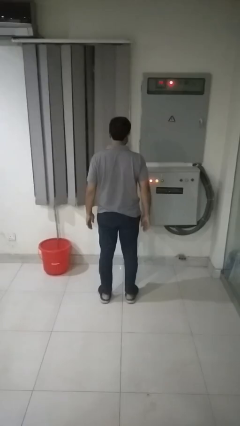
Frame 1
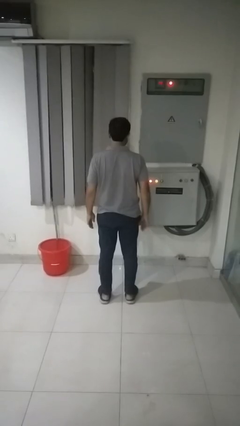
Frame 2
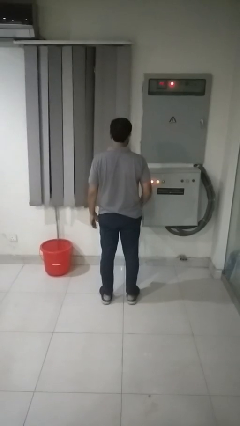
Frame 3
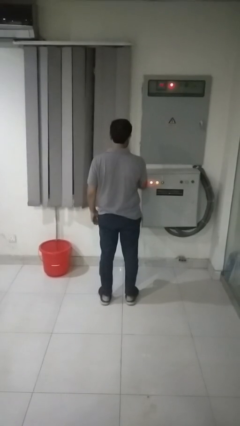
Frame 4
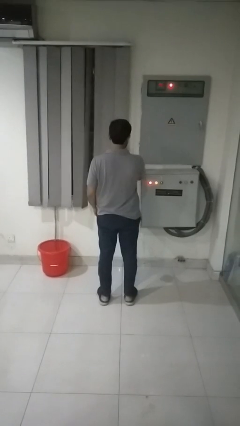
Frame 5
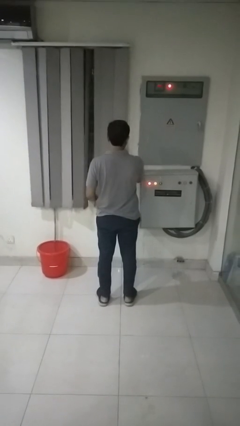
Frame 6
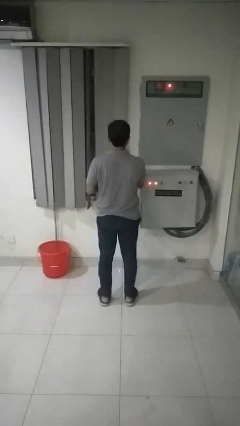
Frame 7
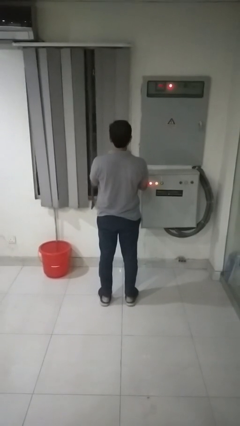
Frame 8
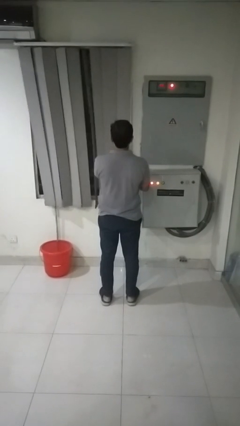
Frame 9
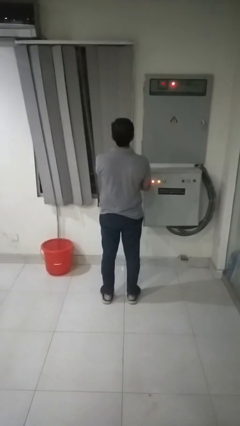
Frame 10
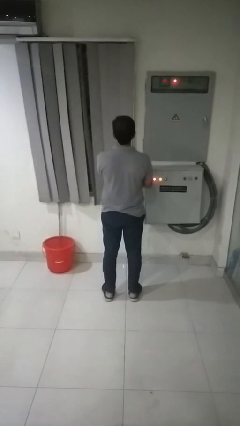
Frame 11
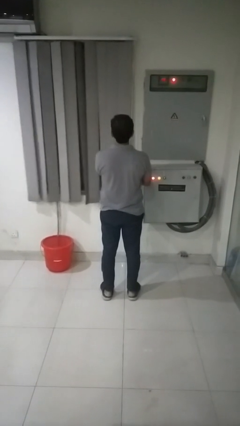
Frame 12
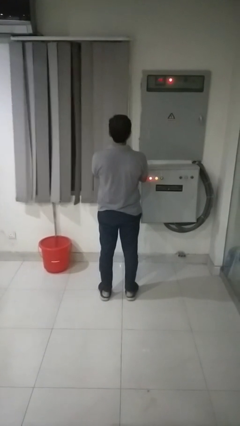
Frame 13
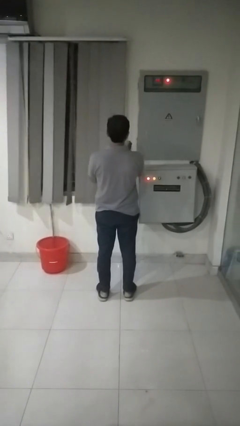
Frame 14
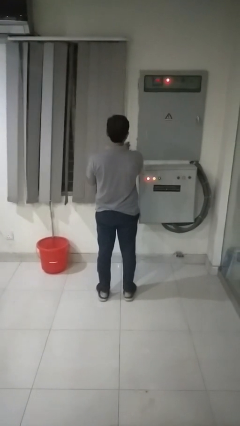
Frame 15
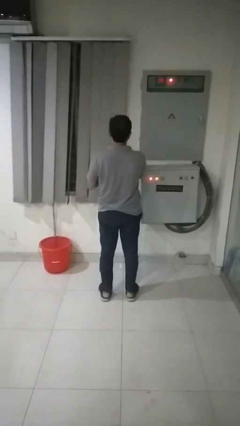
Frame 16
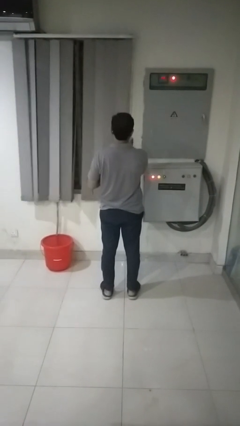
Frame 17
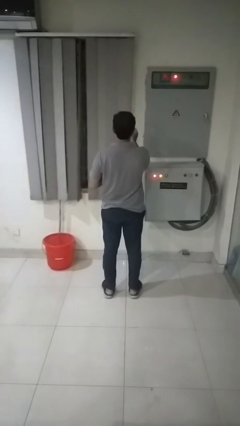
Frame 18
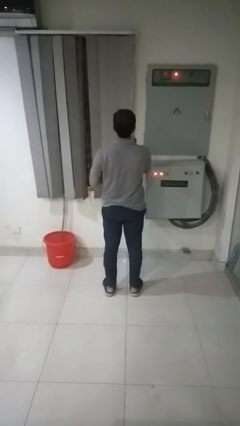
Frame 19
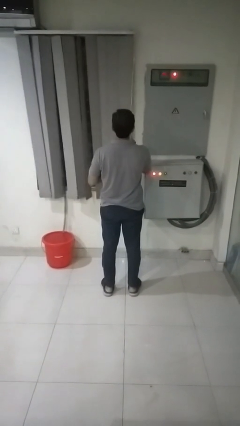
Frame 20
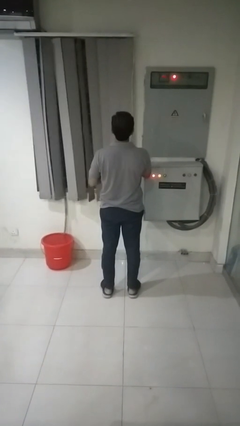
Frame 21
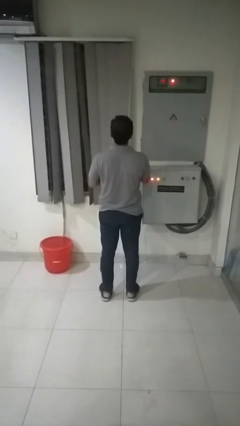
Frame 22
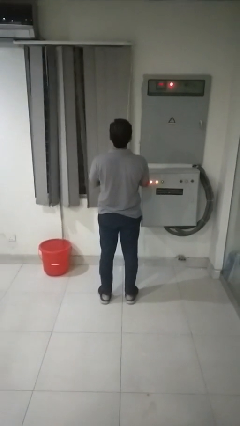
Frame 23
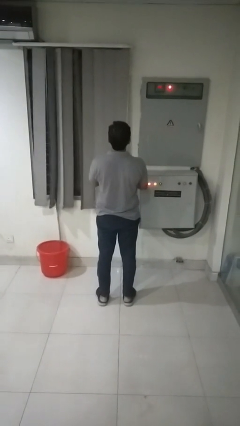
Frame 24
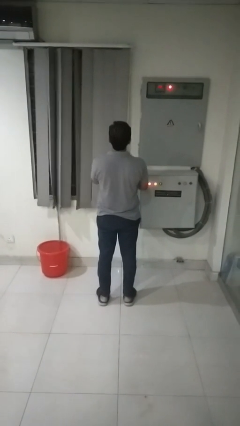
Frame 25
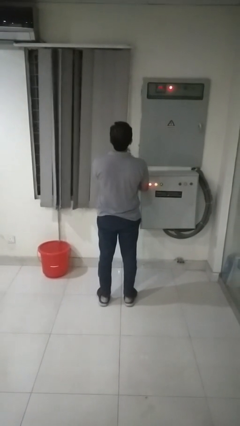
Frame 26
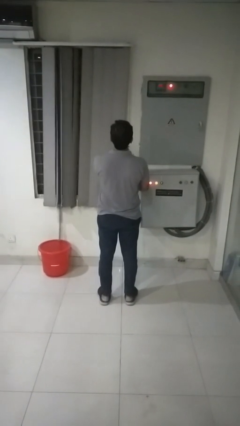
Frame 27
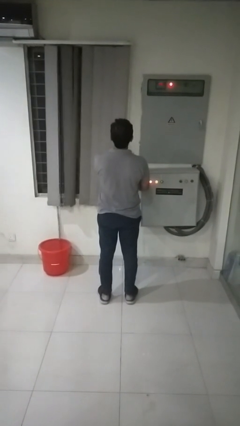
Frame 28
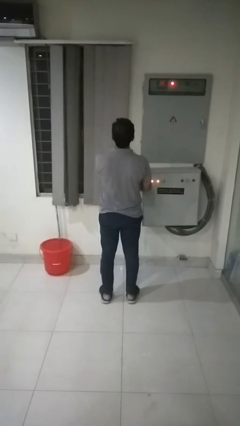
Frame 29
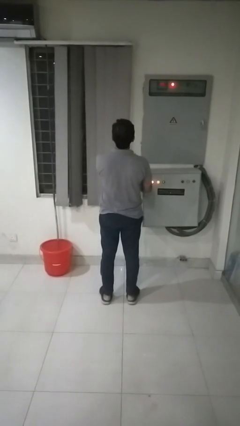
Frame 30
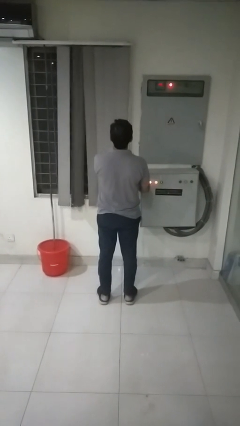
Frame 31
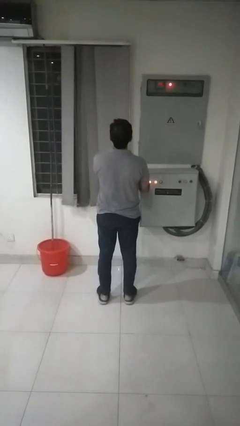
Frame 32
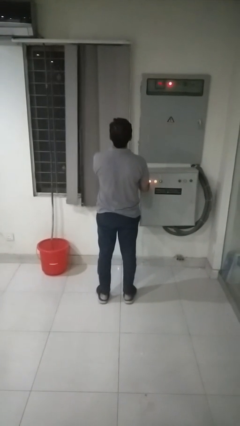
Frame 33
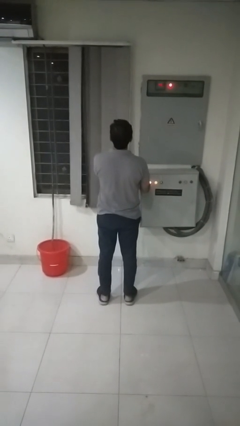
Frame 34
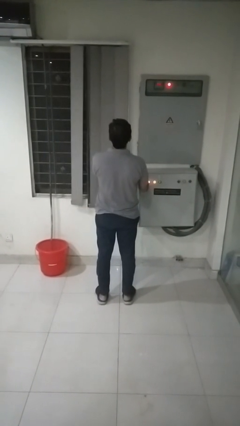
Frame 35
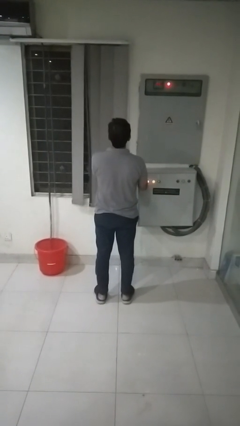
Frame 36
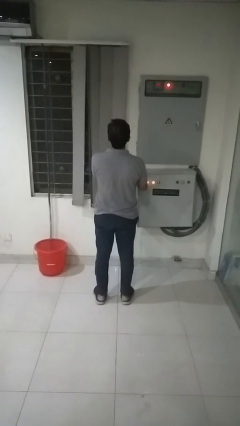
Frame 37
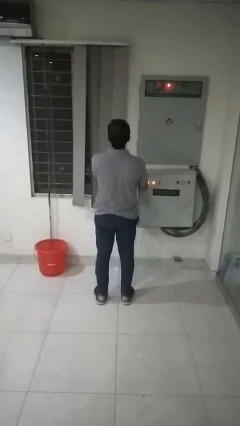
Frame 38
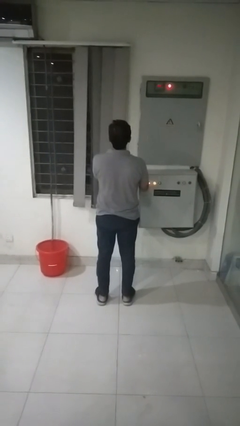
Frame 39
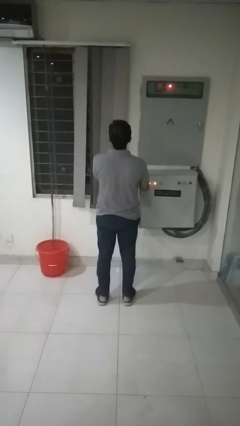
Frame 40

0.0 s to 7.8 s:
person opens curtains

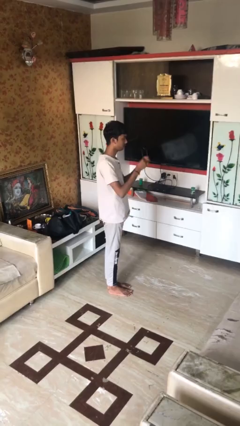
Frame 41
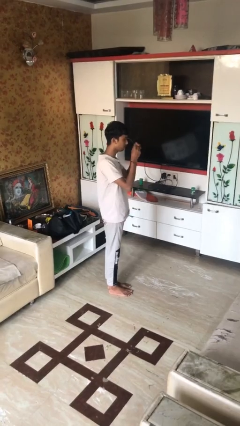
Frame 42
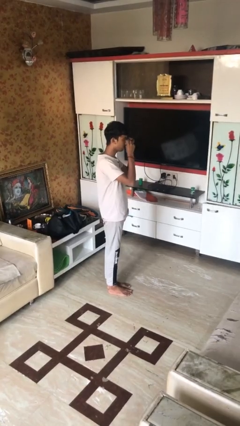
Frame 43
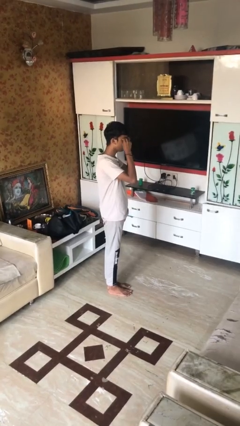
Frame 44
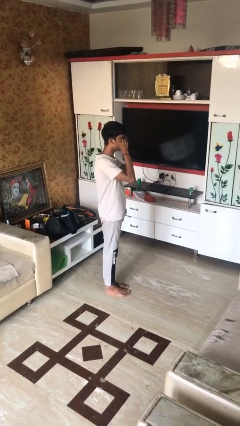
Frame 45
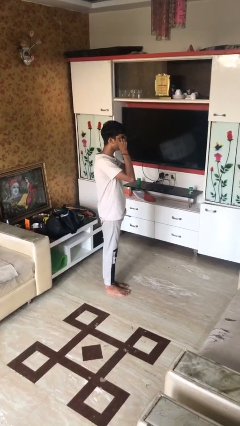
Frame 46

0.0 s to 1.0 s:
person puts on sunglasses

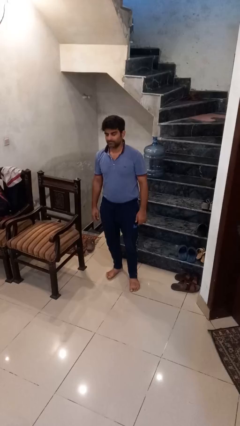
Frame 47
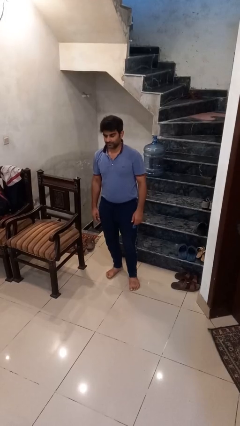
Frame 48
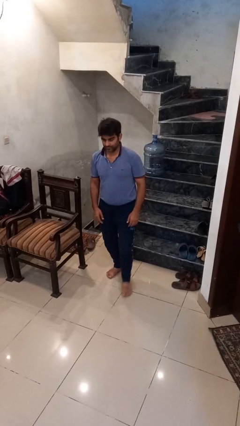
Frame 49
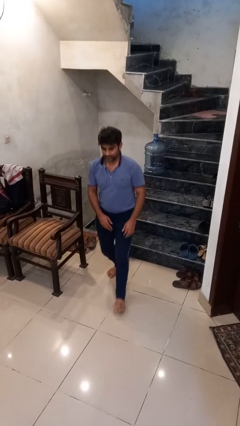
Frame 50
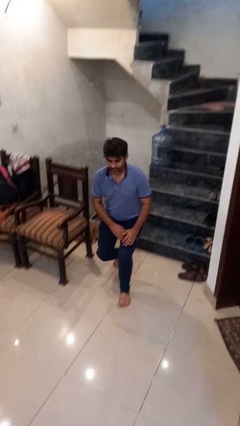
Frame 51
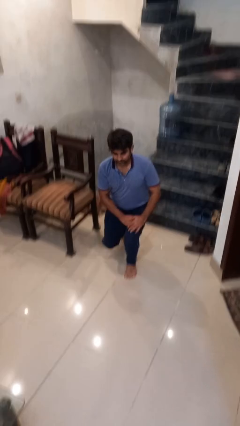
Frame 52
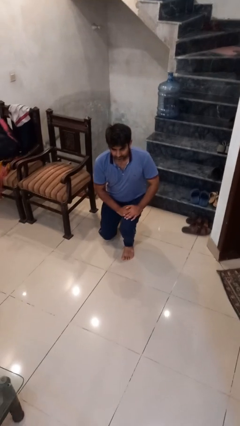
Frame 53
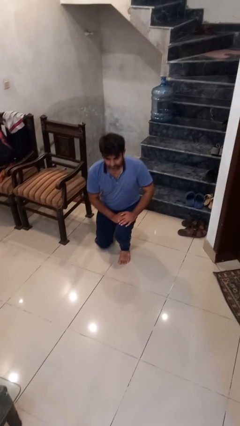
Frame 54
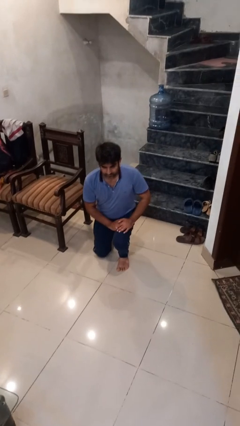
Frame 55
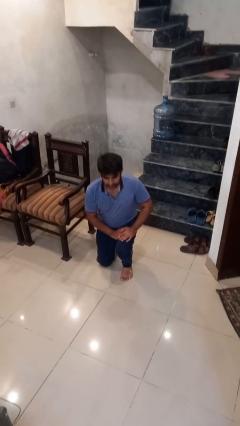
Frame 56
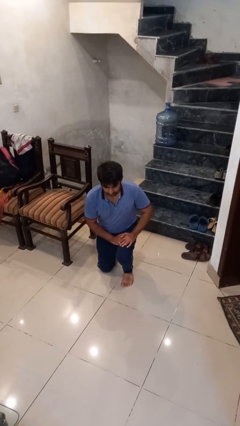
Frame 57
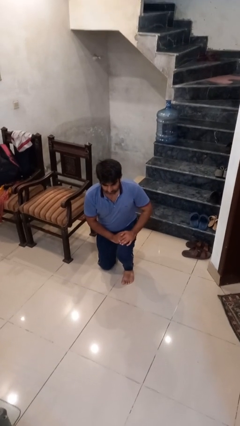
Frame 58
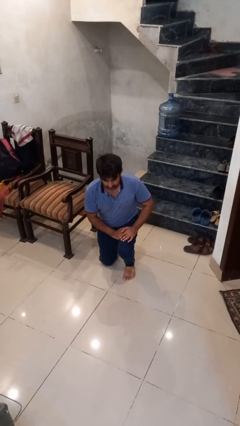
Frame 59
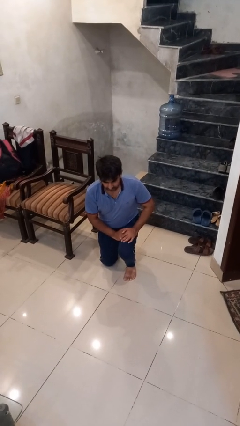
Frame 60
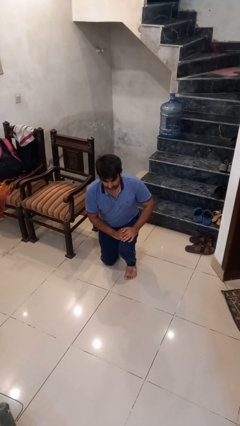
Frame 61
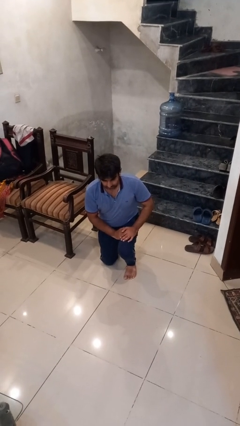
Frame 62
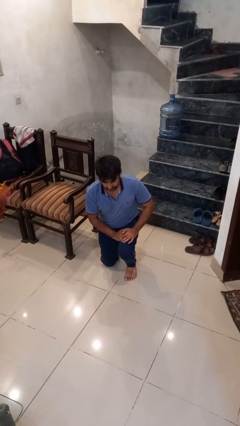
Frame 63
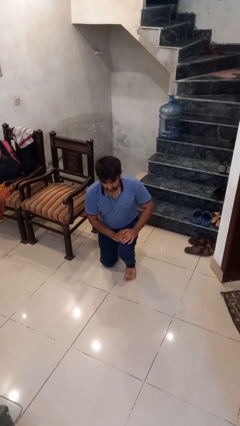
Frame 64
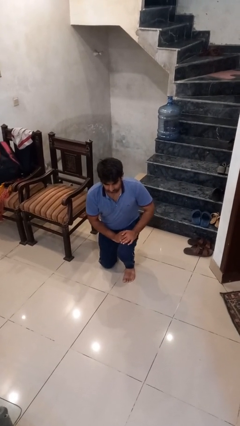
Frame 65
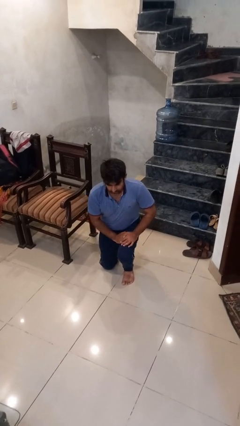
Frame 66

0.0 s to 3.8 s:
person kneels

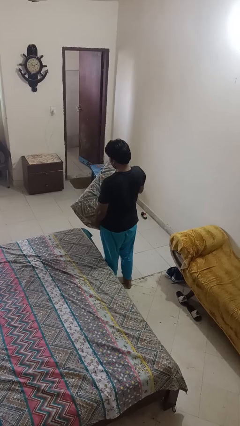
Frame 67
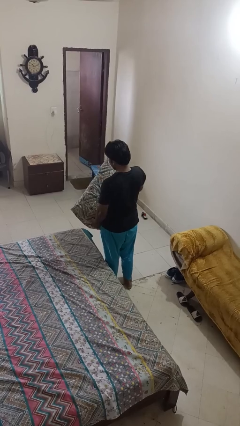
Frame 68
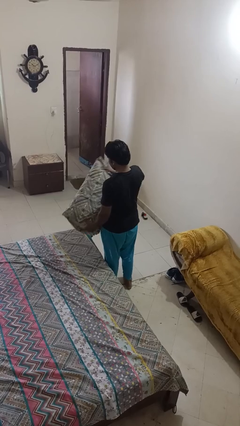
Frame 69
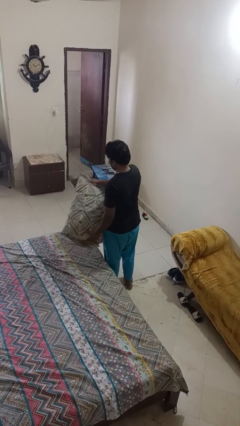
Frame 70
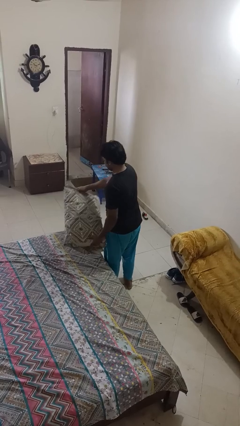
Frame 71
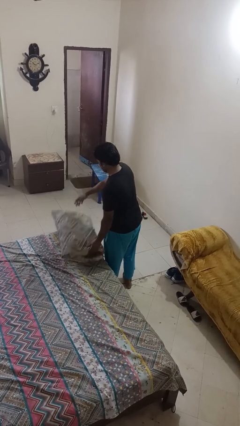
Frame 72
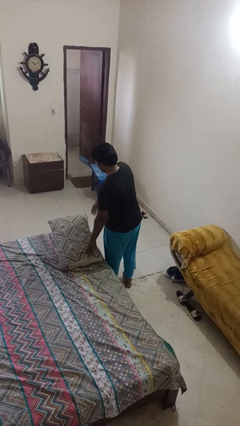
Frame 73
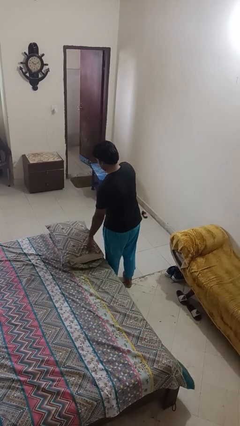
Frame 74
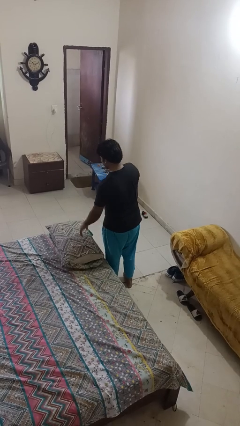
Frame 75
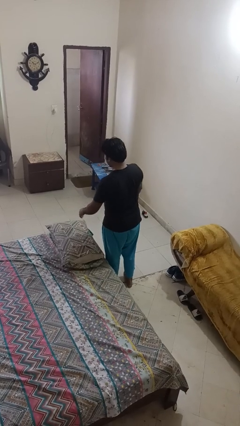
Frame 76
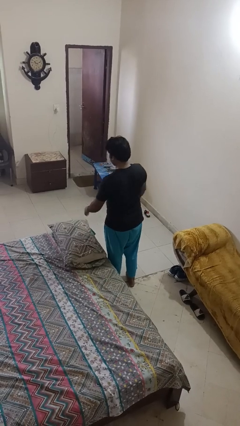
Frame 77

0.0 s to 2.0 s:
person puts down object on bed

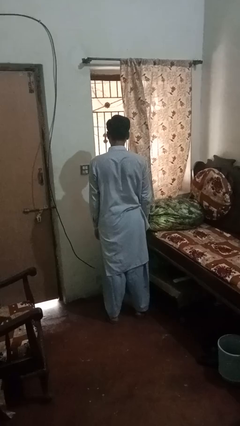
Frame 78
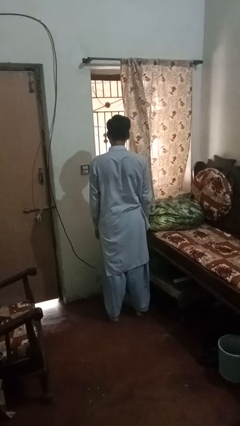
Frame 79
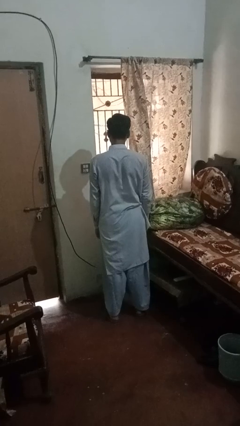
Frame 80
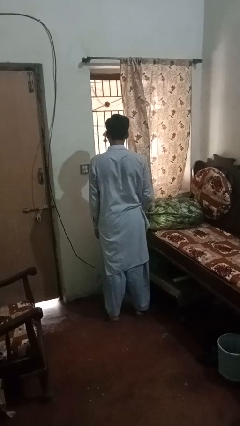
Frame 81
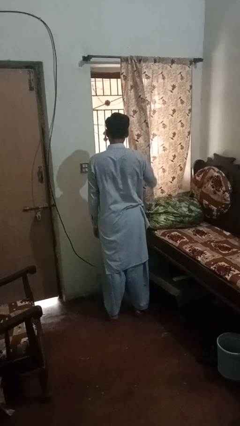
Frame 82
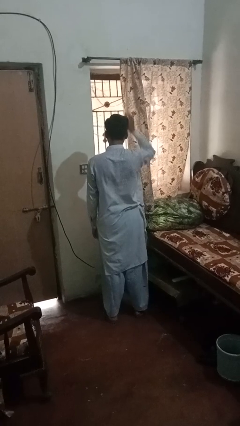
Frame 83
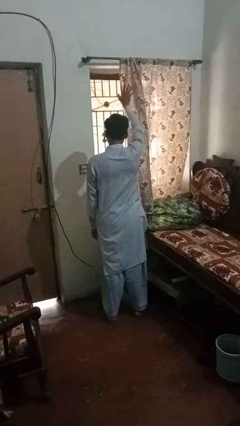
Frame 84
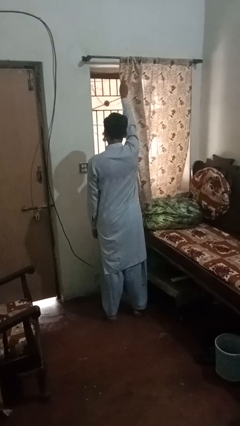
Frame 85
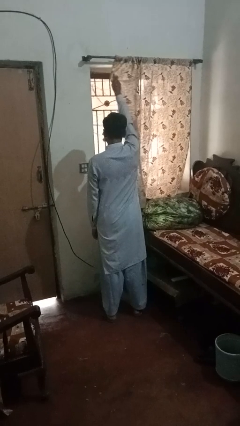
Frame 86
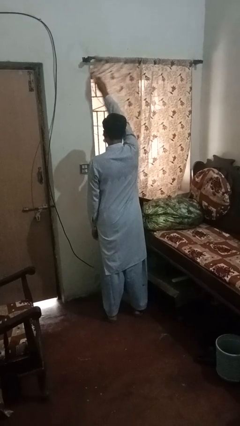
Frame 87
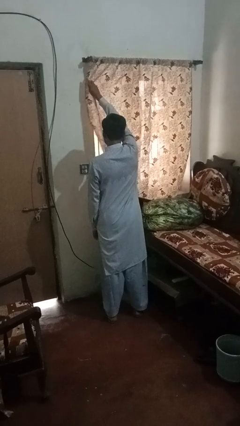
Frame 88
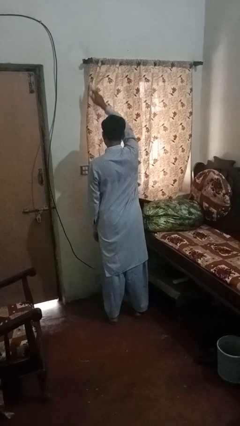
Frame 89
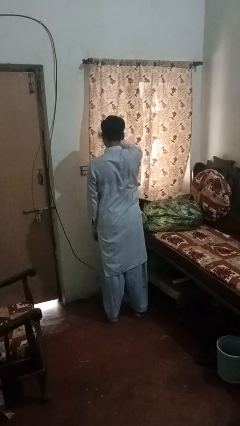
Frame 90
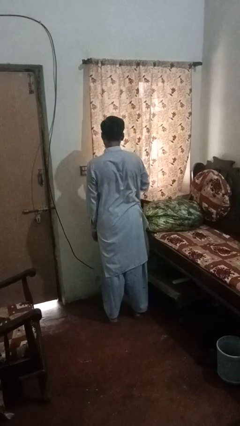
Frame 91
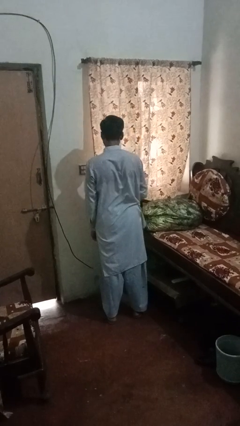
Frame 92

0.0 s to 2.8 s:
person closes curtains

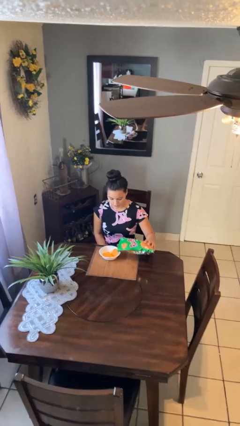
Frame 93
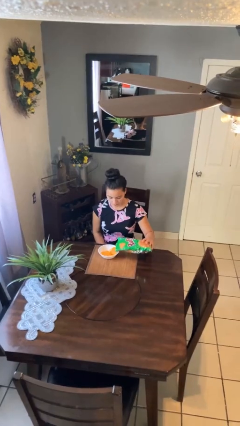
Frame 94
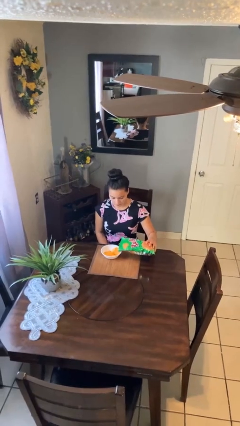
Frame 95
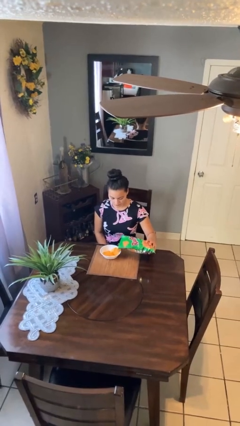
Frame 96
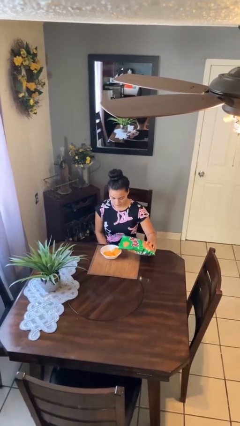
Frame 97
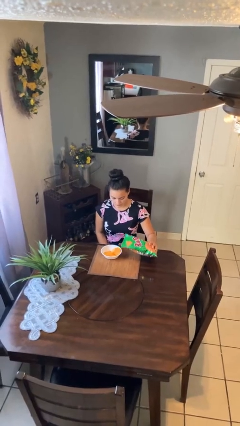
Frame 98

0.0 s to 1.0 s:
person pours into bowl
